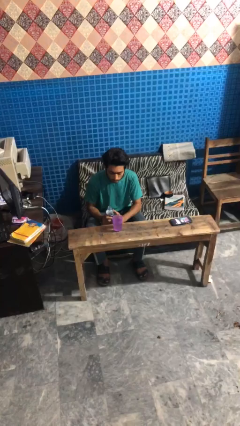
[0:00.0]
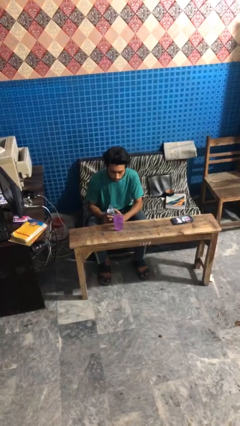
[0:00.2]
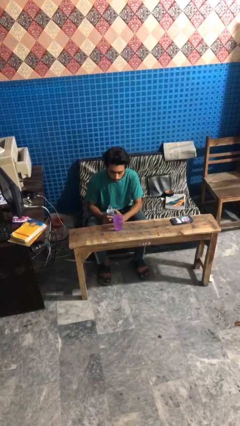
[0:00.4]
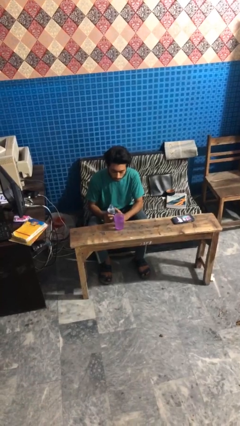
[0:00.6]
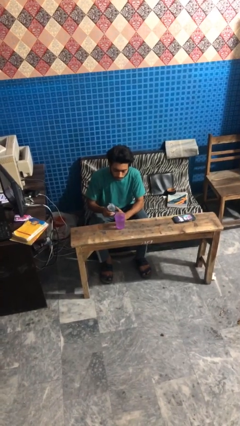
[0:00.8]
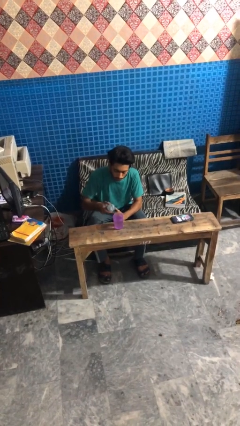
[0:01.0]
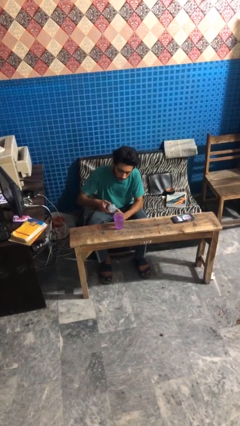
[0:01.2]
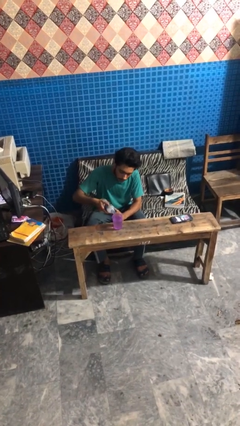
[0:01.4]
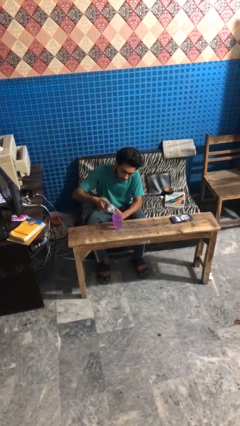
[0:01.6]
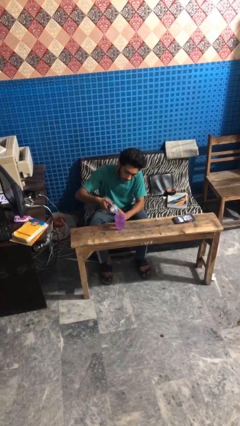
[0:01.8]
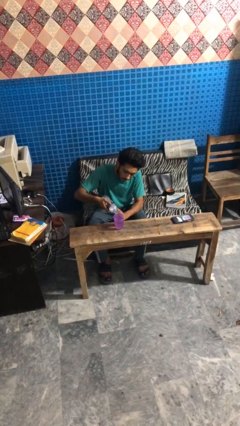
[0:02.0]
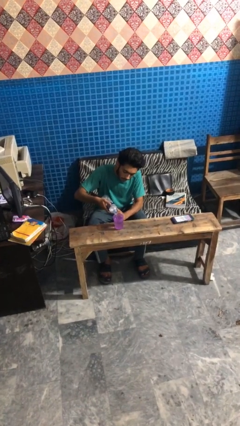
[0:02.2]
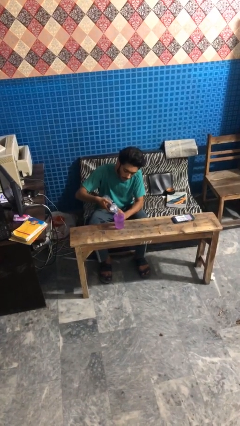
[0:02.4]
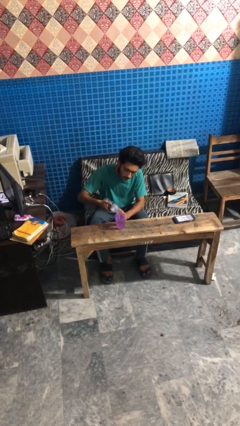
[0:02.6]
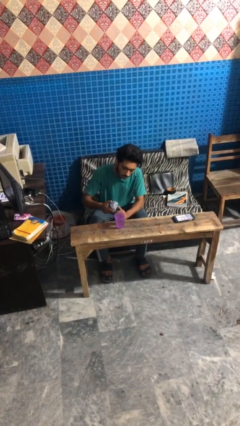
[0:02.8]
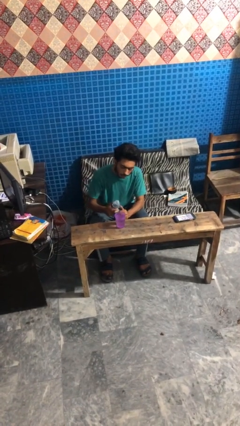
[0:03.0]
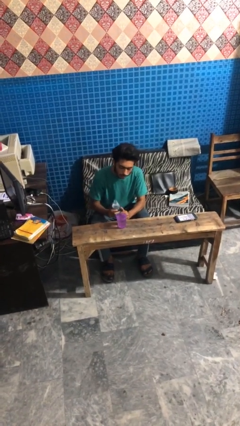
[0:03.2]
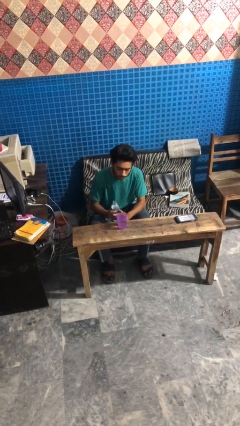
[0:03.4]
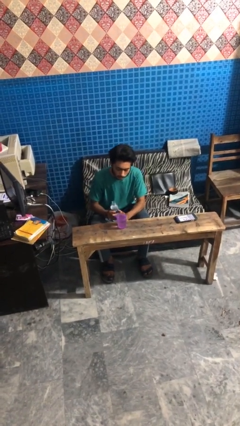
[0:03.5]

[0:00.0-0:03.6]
person pours liquid into cup

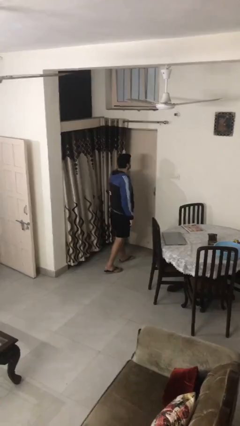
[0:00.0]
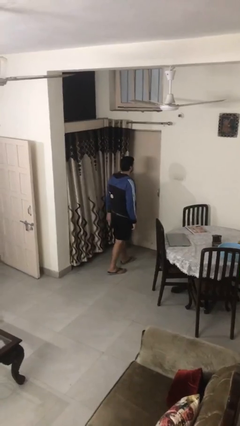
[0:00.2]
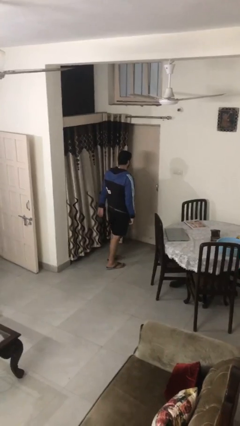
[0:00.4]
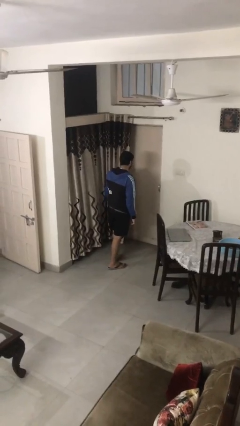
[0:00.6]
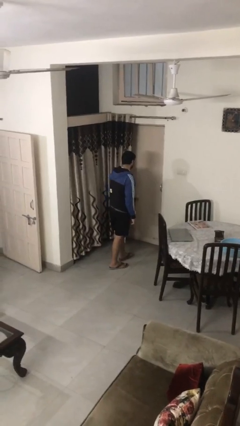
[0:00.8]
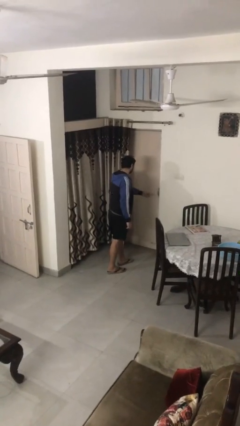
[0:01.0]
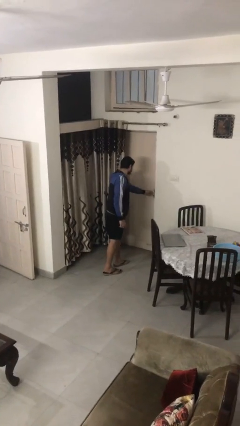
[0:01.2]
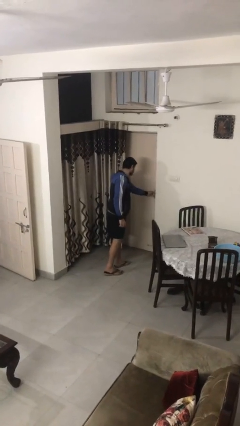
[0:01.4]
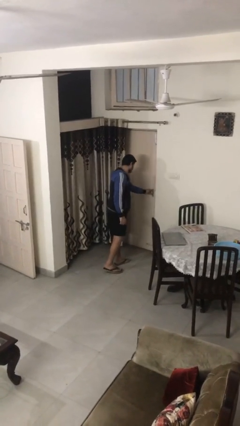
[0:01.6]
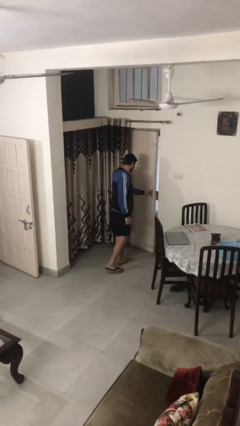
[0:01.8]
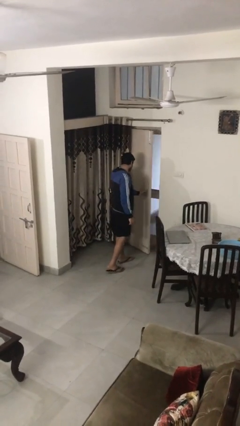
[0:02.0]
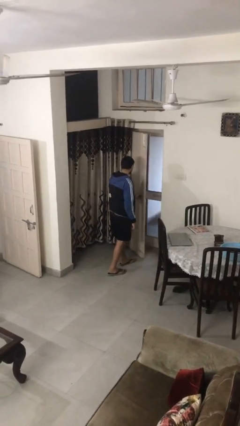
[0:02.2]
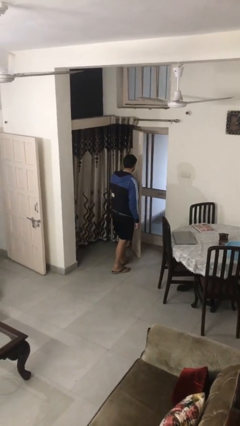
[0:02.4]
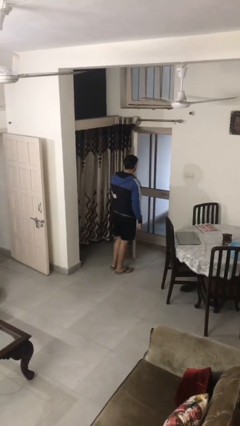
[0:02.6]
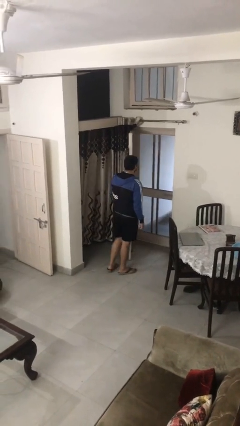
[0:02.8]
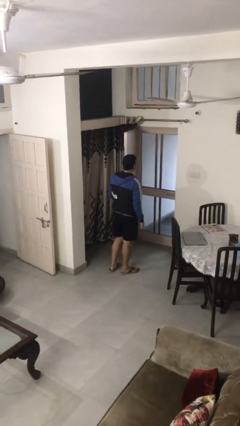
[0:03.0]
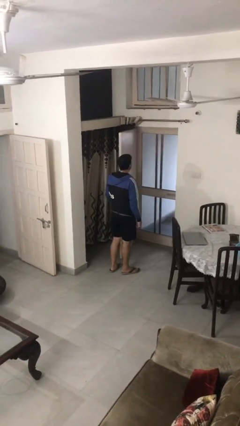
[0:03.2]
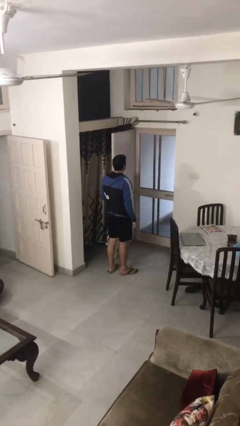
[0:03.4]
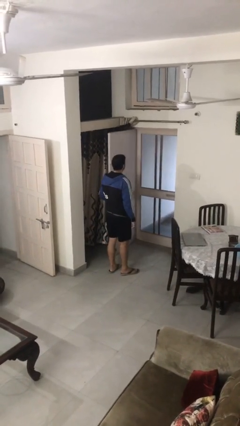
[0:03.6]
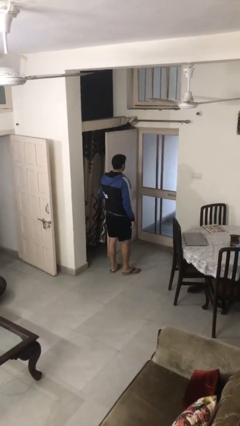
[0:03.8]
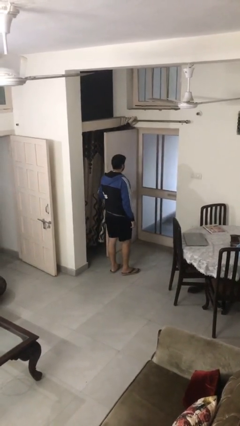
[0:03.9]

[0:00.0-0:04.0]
person opens facility door

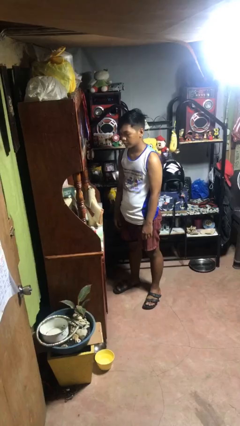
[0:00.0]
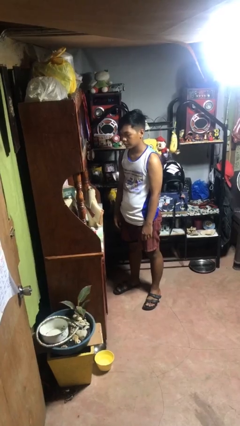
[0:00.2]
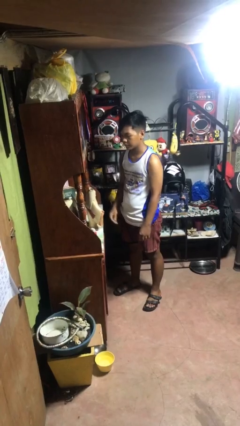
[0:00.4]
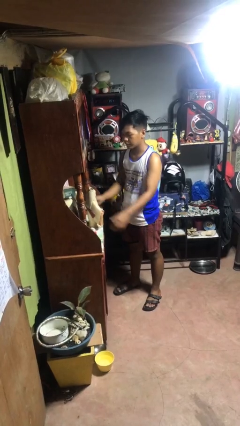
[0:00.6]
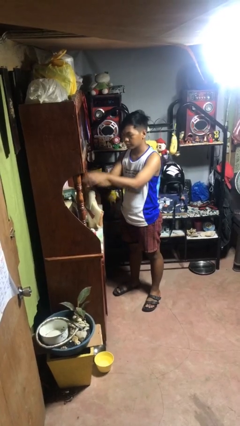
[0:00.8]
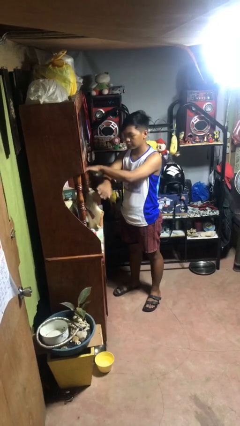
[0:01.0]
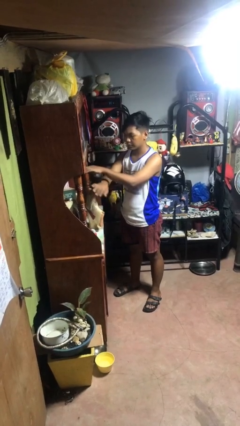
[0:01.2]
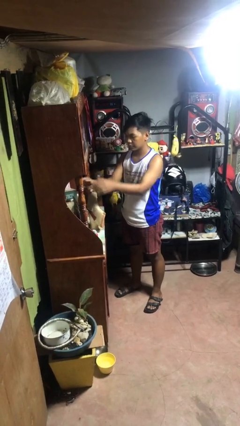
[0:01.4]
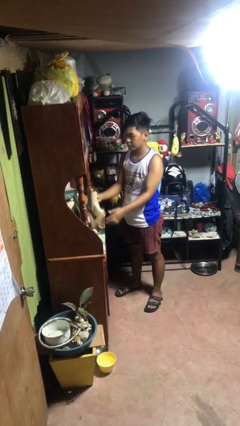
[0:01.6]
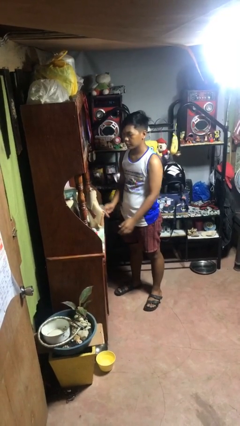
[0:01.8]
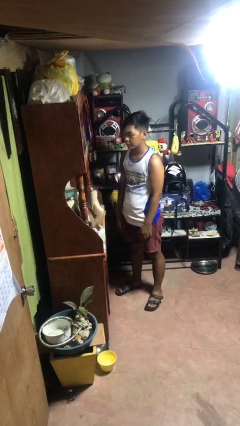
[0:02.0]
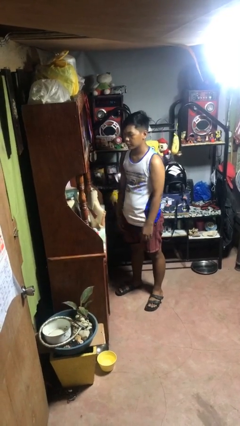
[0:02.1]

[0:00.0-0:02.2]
person waves hand over object

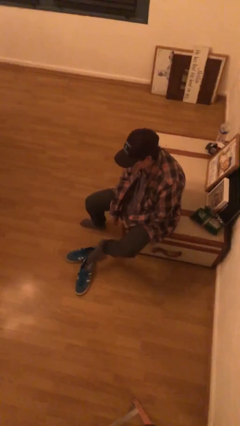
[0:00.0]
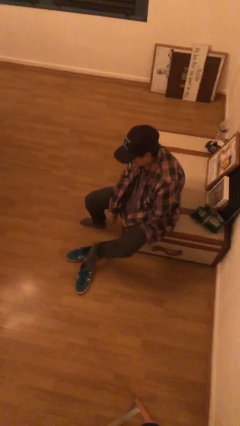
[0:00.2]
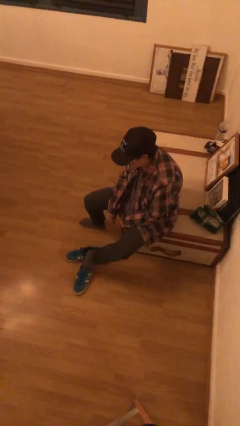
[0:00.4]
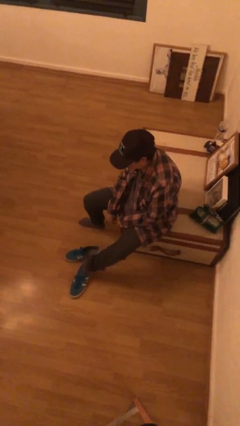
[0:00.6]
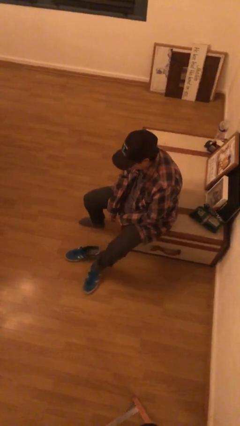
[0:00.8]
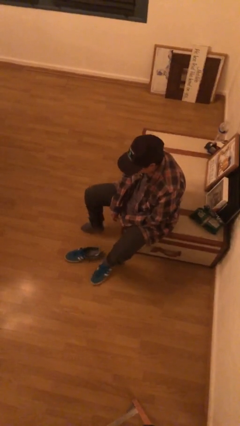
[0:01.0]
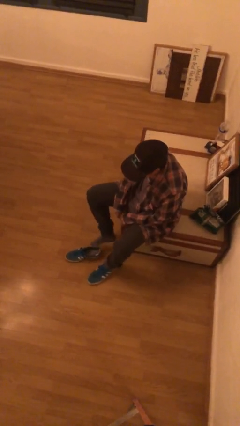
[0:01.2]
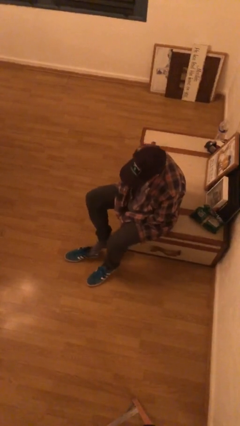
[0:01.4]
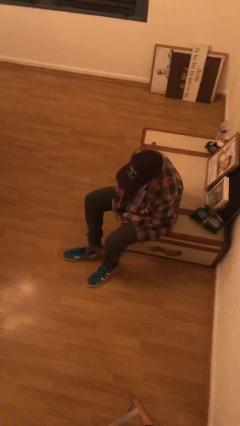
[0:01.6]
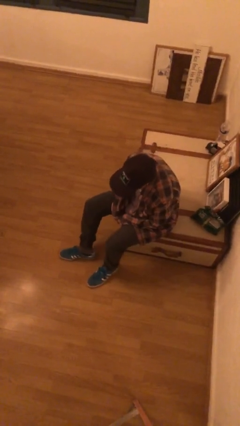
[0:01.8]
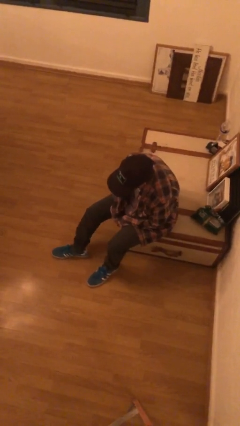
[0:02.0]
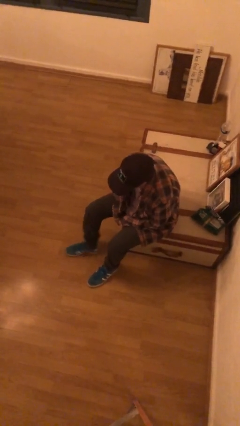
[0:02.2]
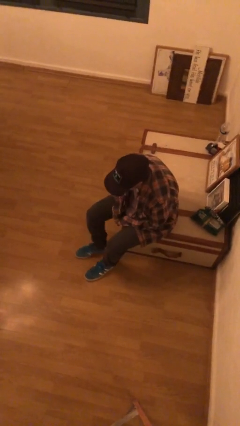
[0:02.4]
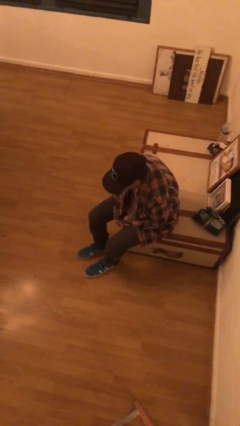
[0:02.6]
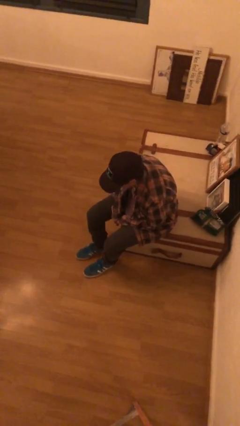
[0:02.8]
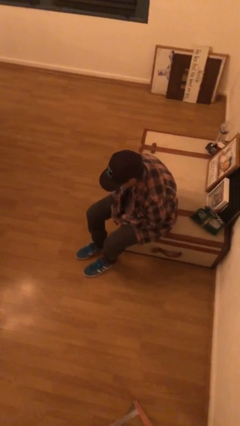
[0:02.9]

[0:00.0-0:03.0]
person puts on shoes

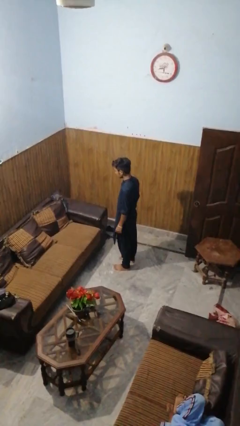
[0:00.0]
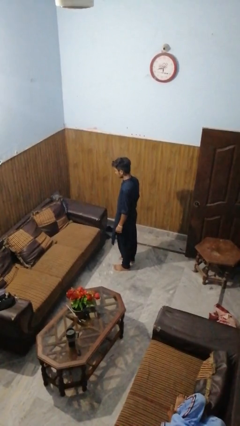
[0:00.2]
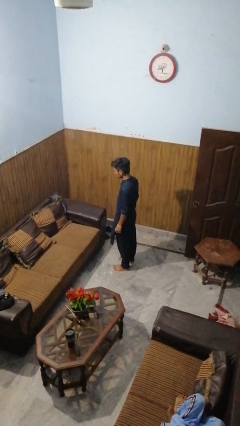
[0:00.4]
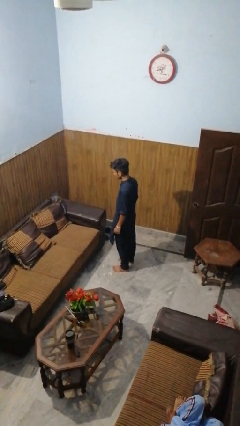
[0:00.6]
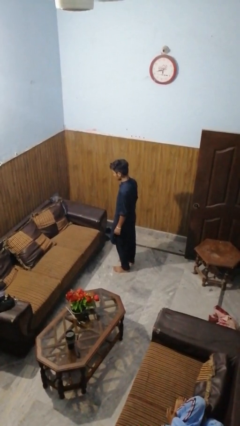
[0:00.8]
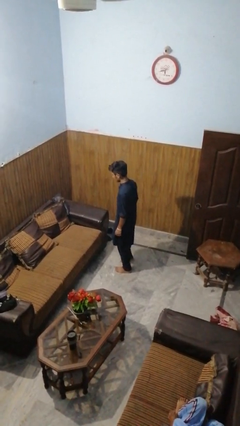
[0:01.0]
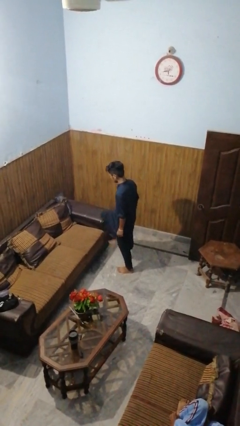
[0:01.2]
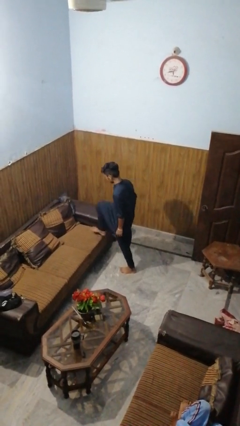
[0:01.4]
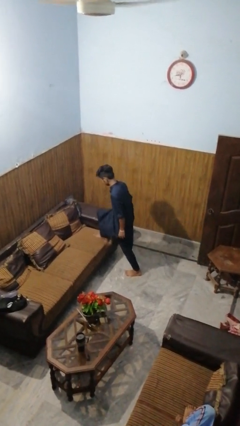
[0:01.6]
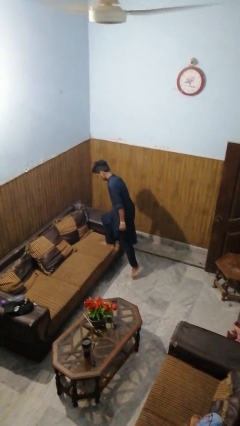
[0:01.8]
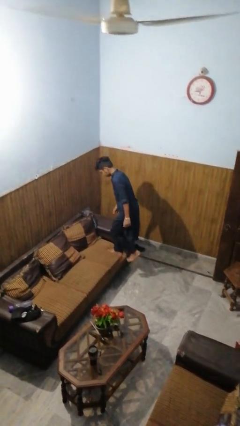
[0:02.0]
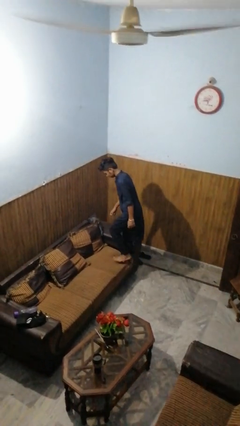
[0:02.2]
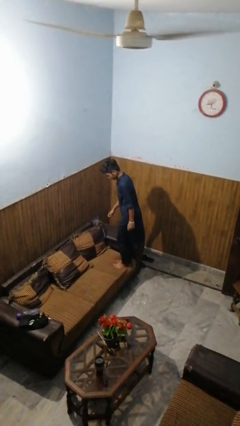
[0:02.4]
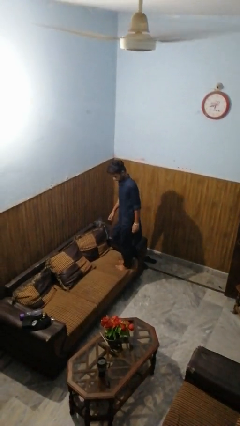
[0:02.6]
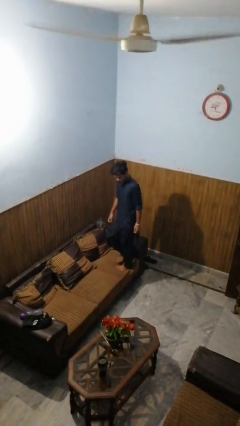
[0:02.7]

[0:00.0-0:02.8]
person climbs on couch

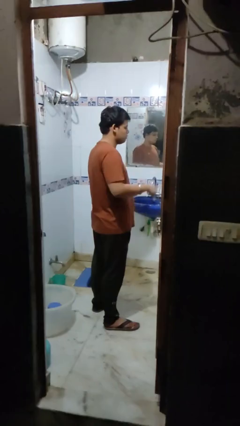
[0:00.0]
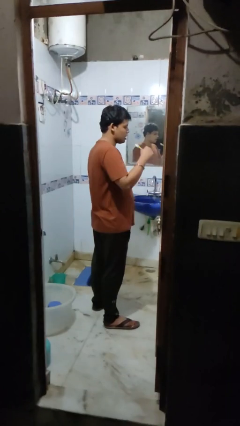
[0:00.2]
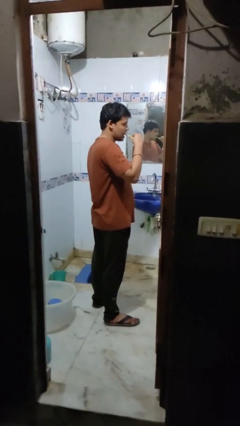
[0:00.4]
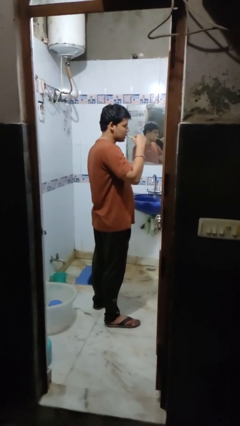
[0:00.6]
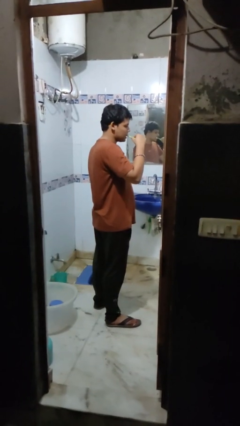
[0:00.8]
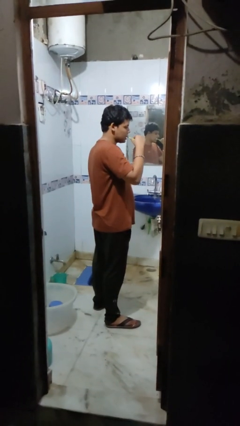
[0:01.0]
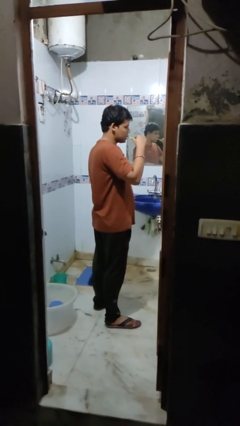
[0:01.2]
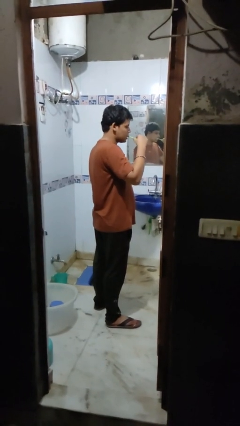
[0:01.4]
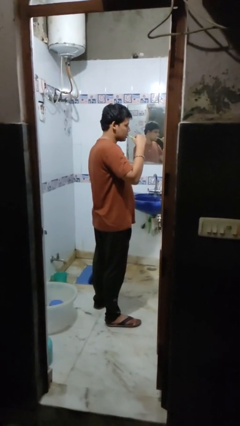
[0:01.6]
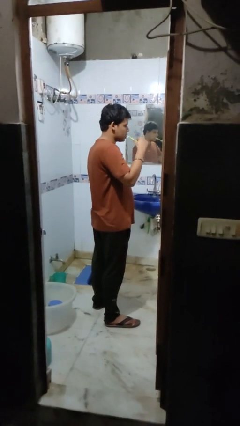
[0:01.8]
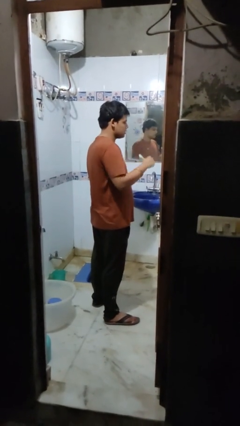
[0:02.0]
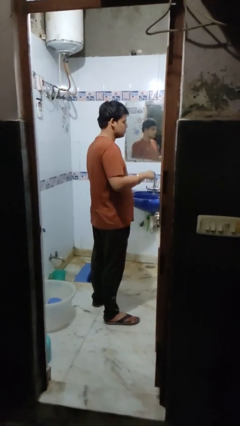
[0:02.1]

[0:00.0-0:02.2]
person brushes teeth
